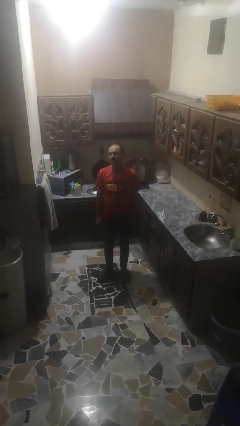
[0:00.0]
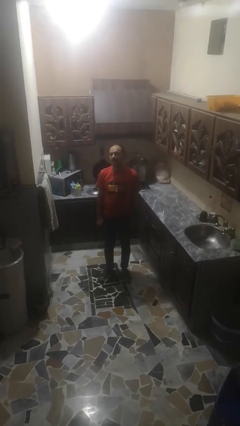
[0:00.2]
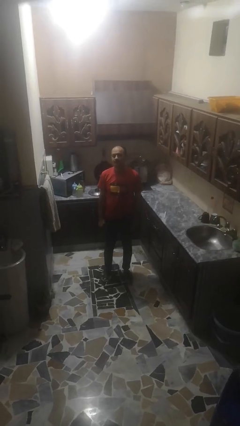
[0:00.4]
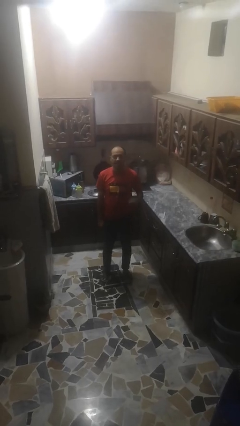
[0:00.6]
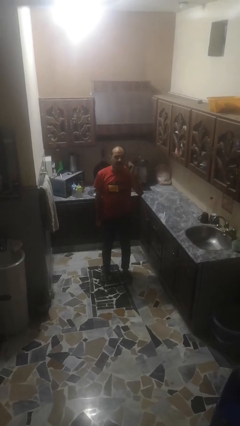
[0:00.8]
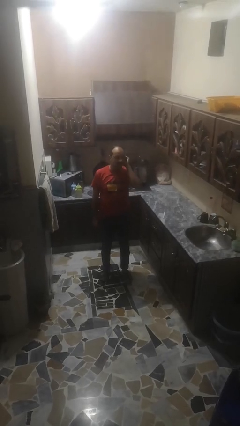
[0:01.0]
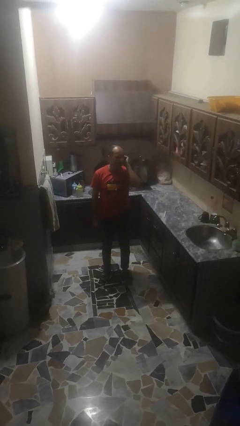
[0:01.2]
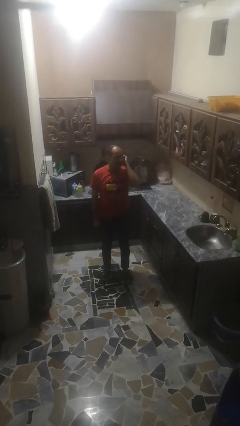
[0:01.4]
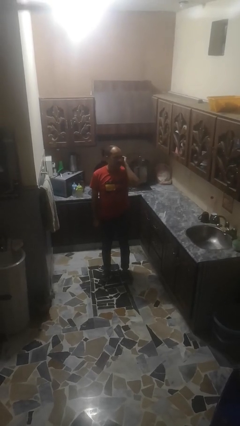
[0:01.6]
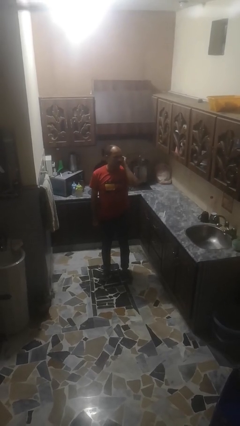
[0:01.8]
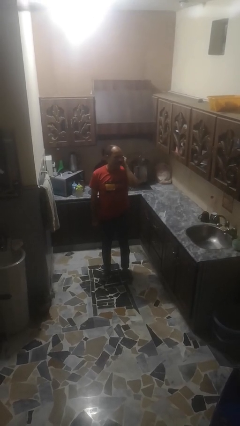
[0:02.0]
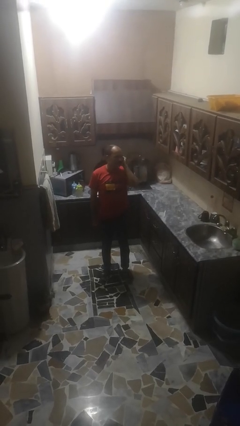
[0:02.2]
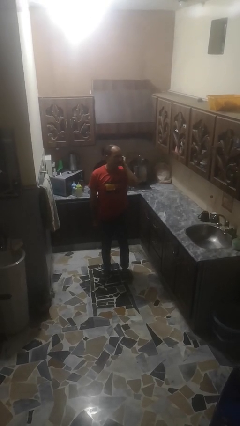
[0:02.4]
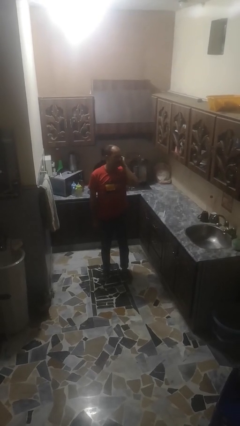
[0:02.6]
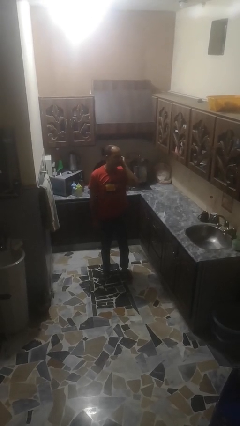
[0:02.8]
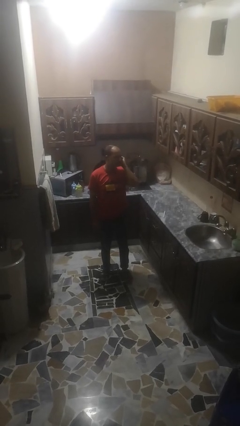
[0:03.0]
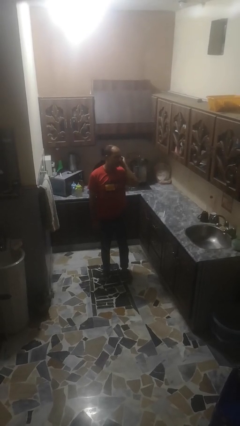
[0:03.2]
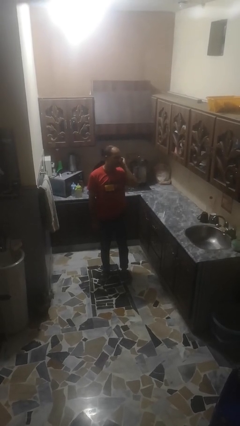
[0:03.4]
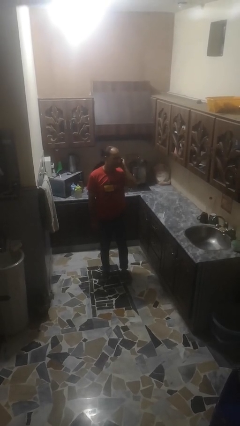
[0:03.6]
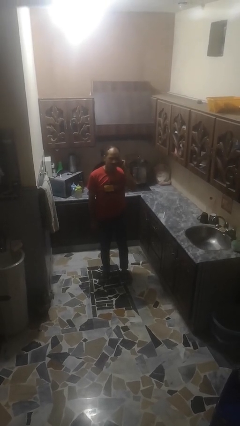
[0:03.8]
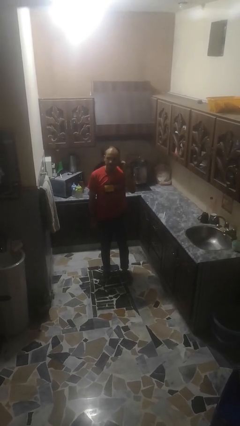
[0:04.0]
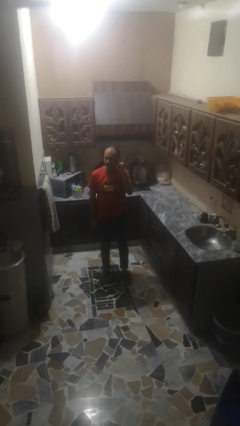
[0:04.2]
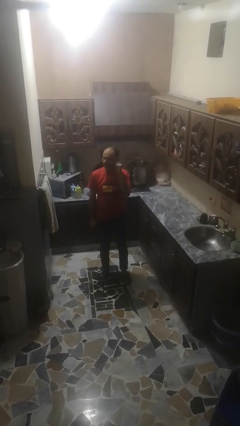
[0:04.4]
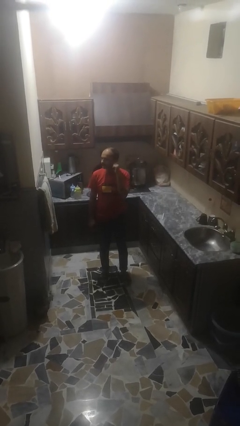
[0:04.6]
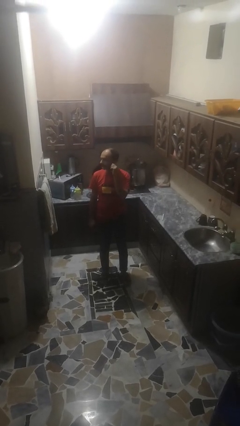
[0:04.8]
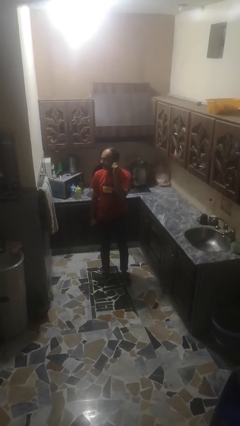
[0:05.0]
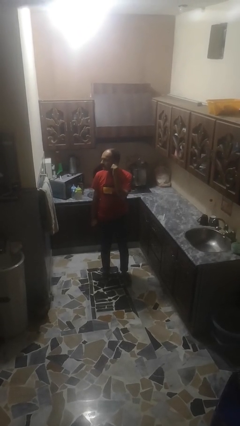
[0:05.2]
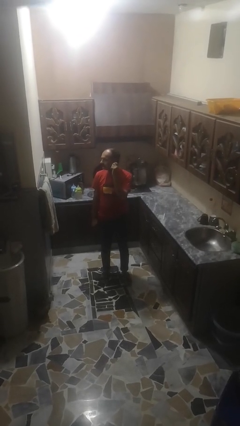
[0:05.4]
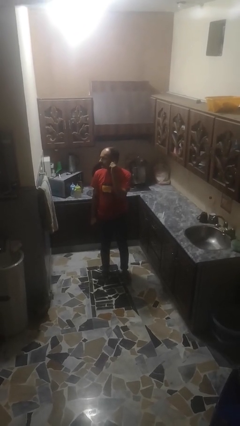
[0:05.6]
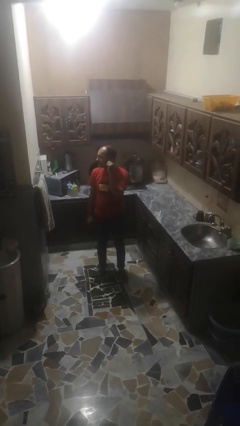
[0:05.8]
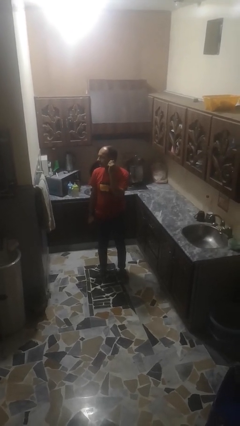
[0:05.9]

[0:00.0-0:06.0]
person touches earlobe

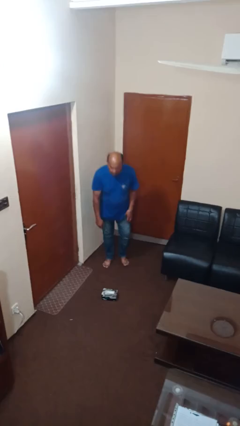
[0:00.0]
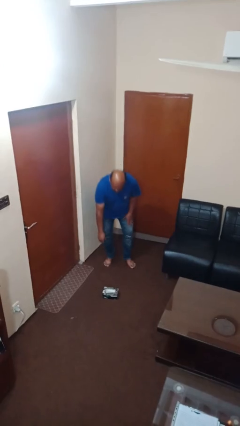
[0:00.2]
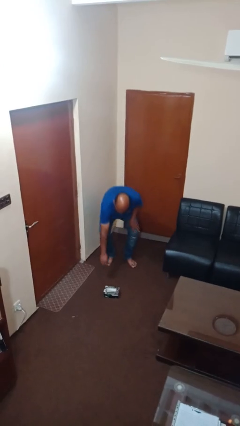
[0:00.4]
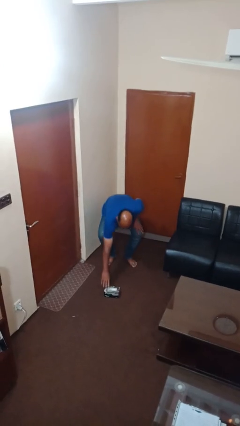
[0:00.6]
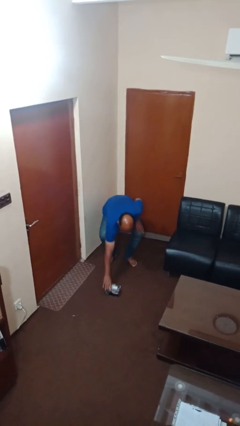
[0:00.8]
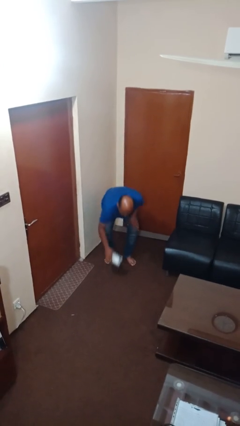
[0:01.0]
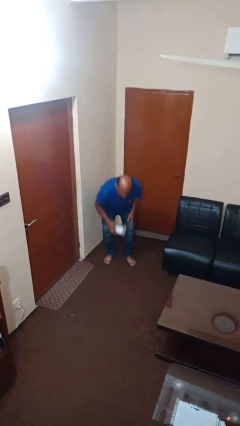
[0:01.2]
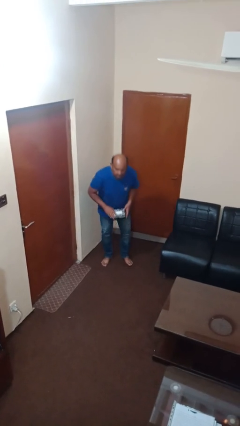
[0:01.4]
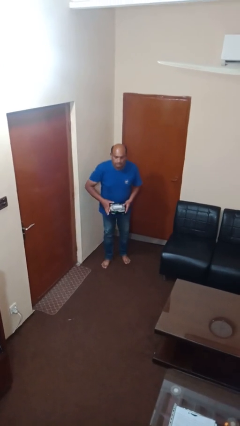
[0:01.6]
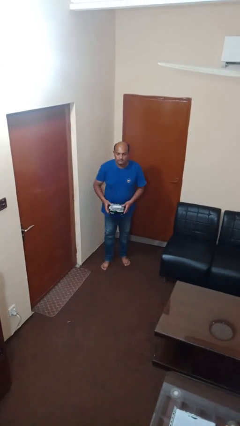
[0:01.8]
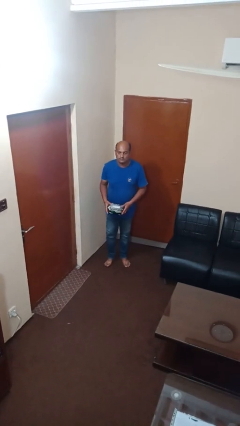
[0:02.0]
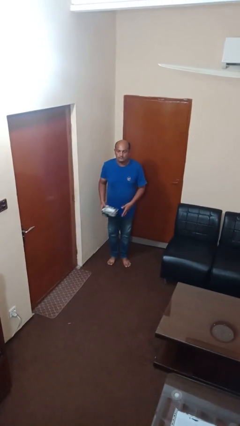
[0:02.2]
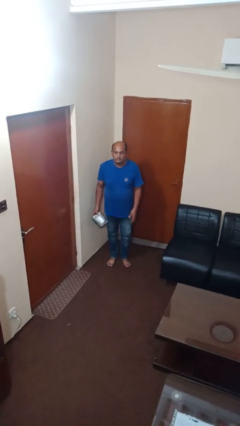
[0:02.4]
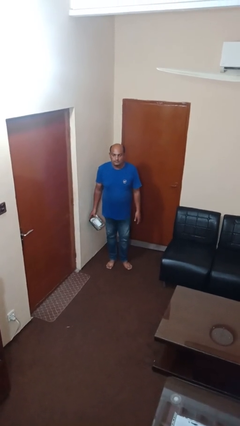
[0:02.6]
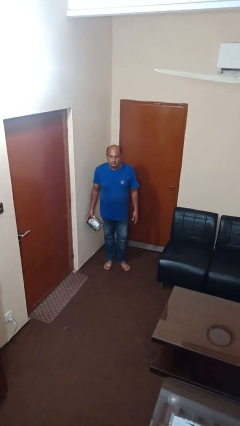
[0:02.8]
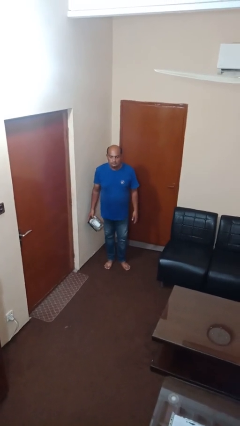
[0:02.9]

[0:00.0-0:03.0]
person picks up object from floor

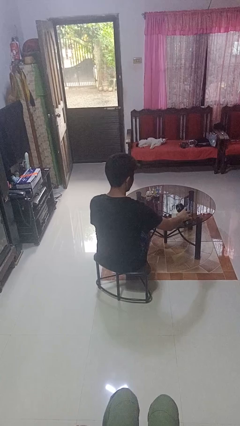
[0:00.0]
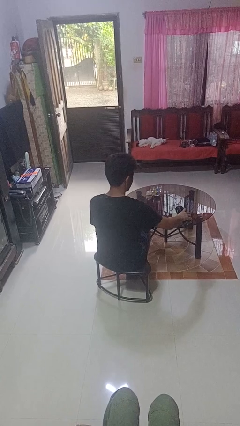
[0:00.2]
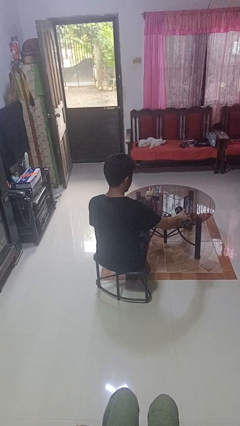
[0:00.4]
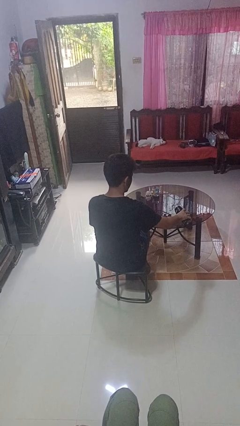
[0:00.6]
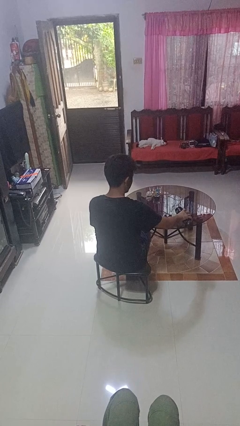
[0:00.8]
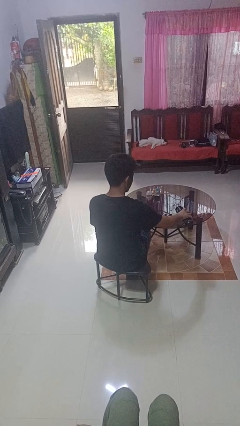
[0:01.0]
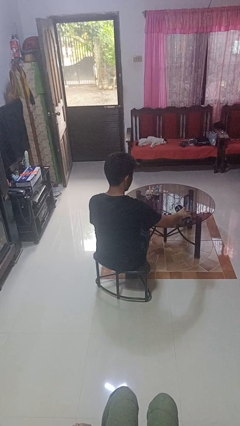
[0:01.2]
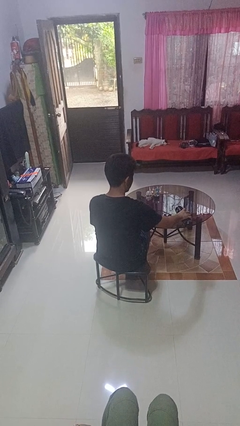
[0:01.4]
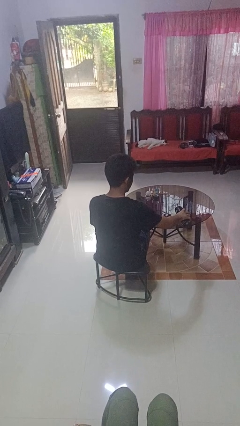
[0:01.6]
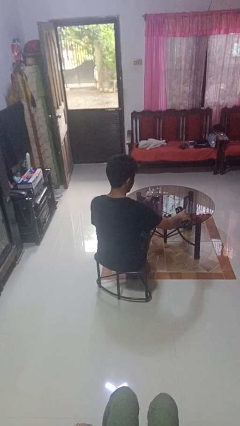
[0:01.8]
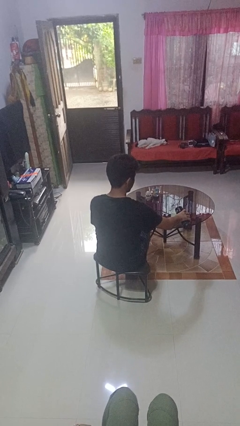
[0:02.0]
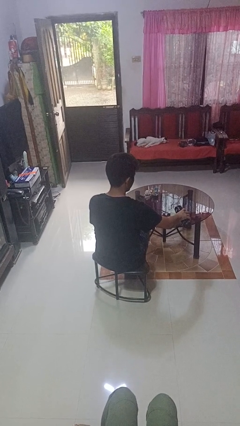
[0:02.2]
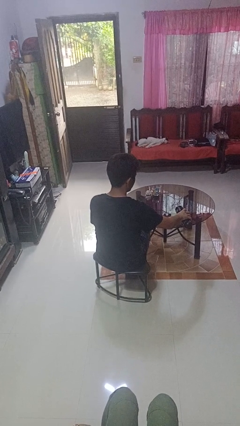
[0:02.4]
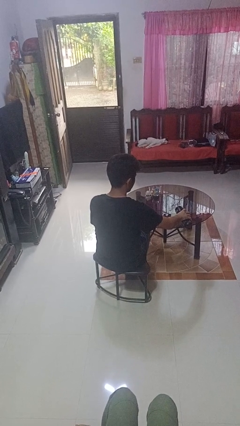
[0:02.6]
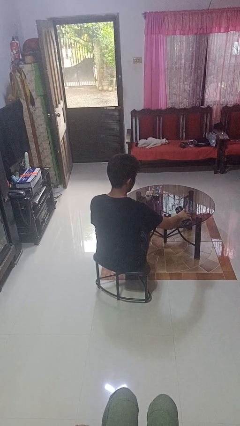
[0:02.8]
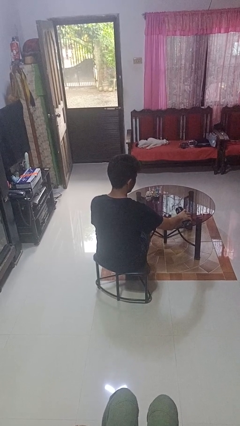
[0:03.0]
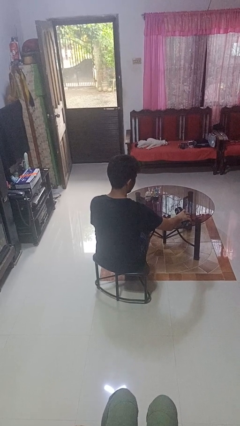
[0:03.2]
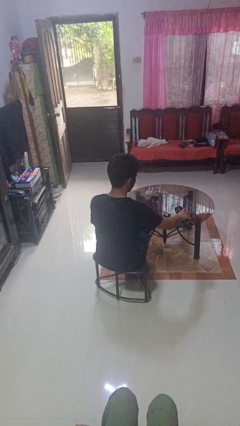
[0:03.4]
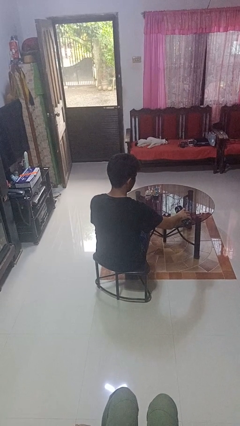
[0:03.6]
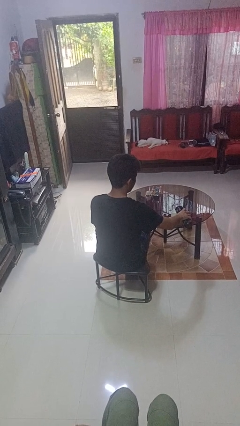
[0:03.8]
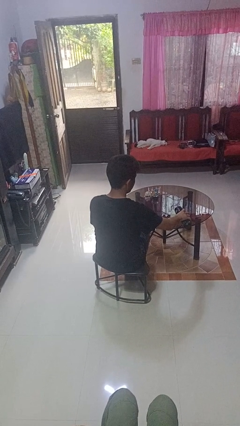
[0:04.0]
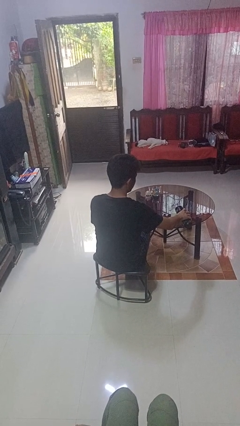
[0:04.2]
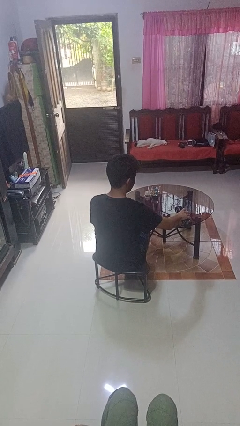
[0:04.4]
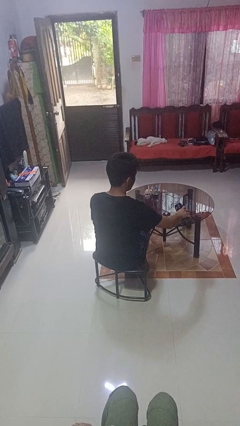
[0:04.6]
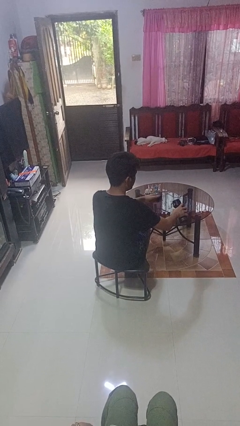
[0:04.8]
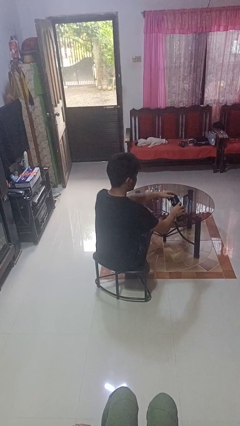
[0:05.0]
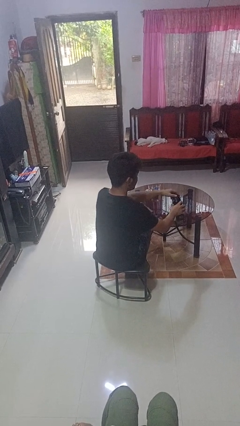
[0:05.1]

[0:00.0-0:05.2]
person pours liquid into cup

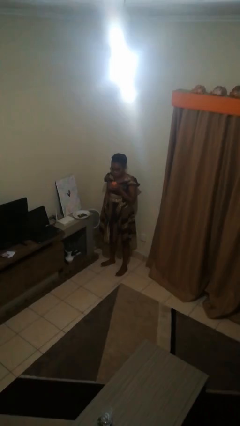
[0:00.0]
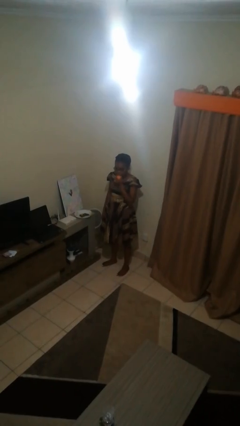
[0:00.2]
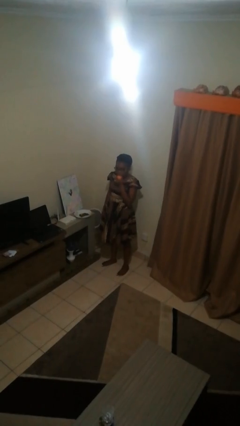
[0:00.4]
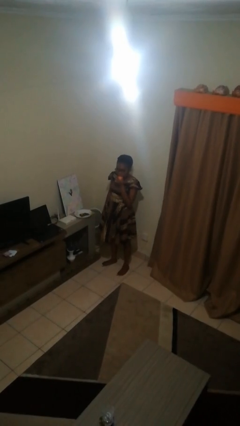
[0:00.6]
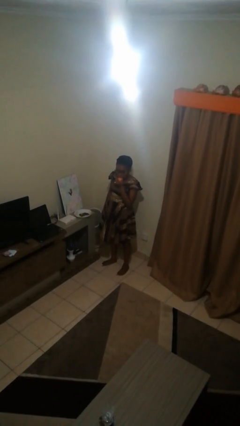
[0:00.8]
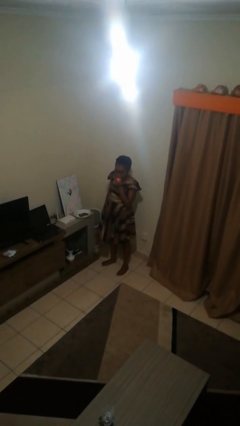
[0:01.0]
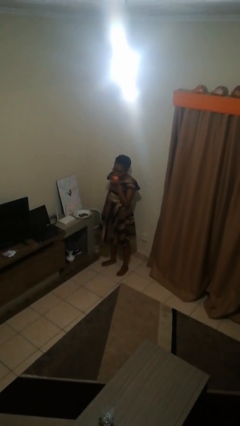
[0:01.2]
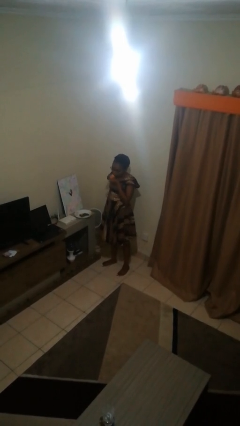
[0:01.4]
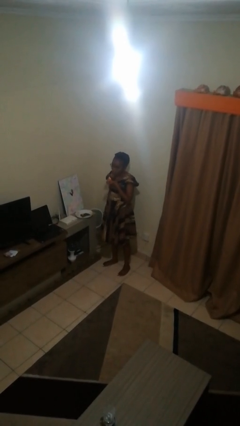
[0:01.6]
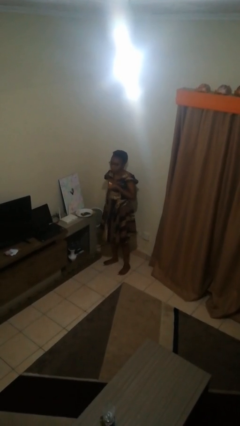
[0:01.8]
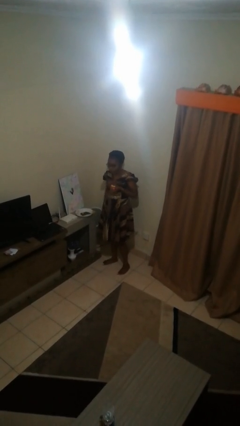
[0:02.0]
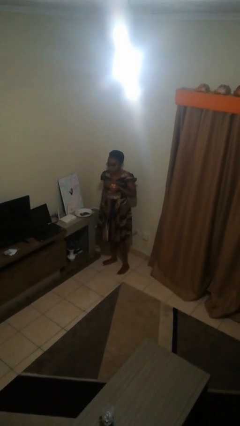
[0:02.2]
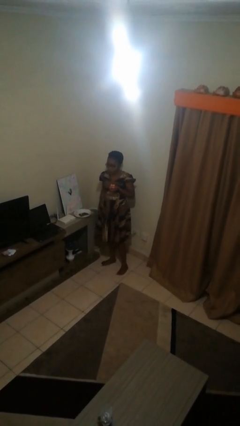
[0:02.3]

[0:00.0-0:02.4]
person eats apple

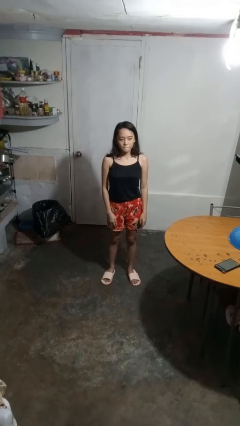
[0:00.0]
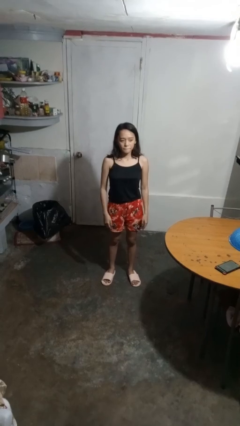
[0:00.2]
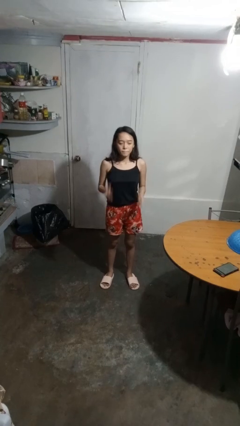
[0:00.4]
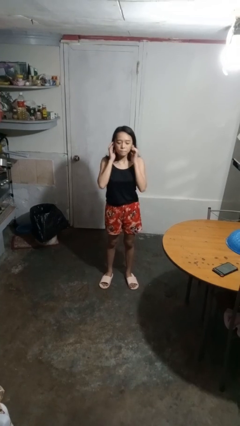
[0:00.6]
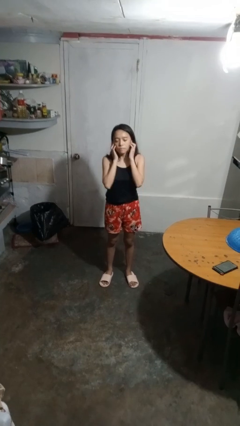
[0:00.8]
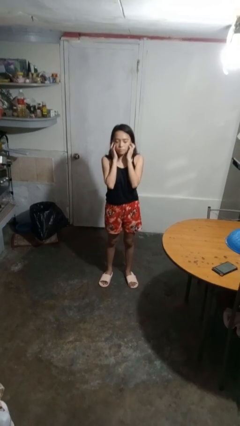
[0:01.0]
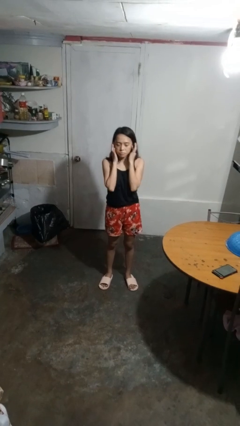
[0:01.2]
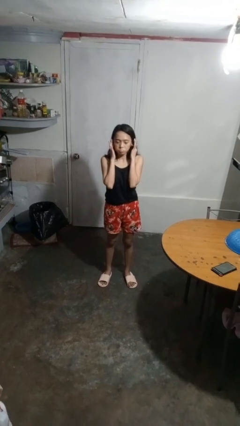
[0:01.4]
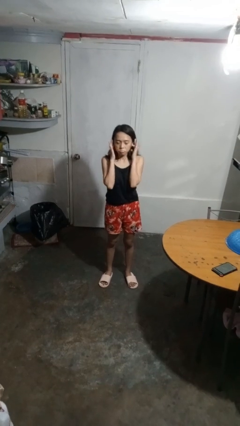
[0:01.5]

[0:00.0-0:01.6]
person puts fingers in ear
